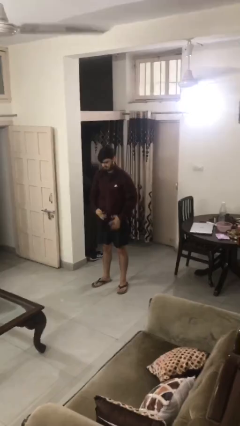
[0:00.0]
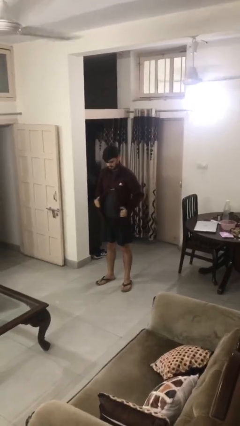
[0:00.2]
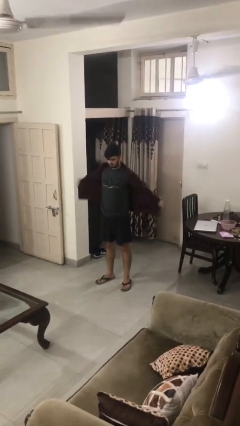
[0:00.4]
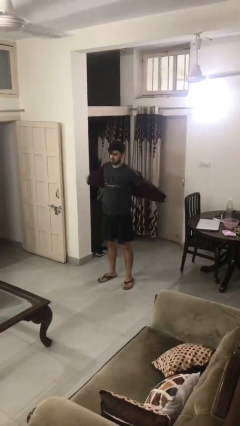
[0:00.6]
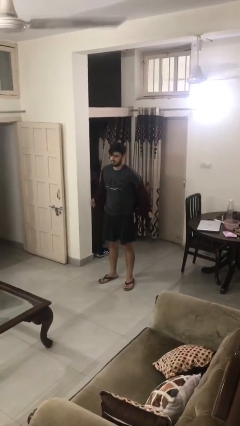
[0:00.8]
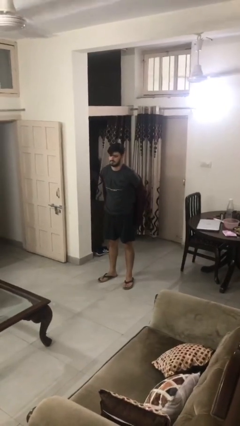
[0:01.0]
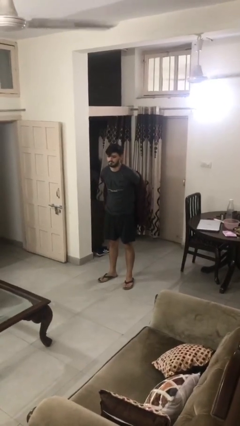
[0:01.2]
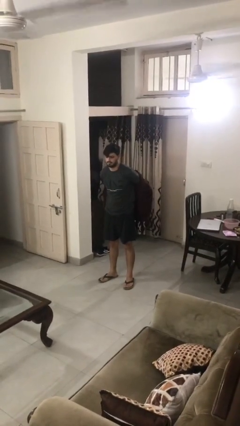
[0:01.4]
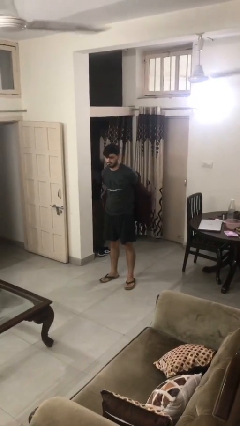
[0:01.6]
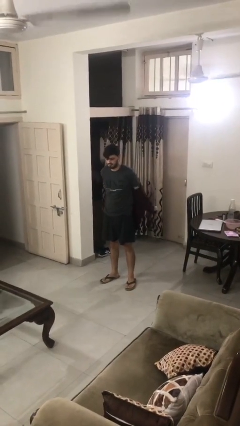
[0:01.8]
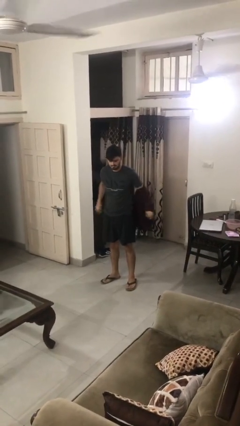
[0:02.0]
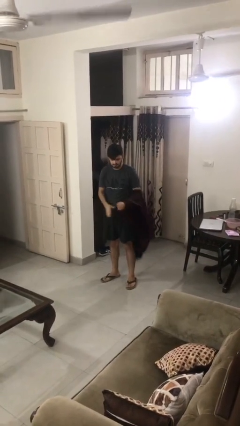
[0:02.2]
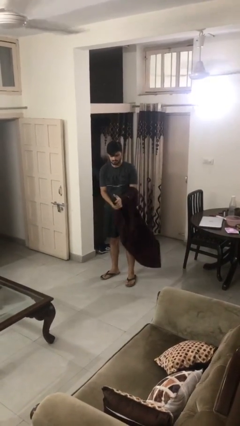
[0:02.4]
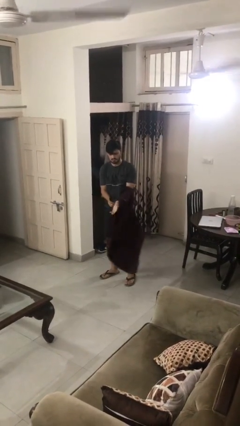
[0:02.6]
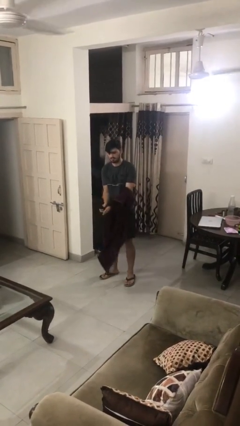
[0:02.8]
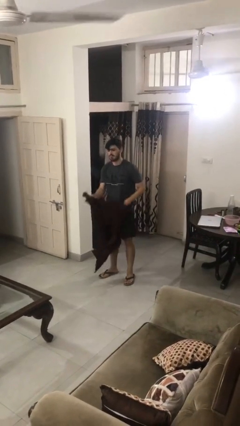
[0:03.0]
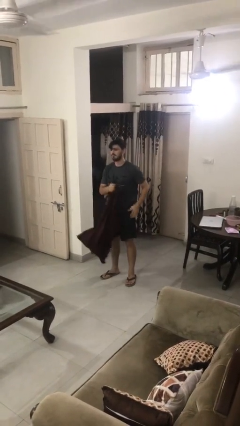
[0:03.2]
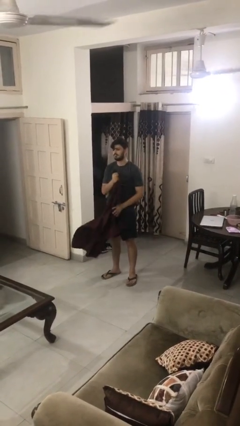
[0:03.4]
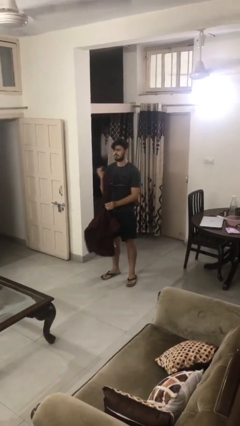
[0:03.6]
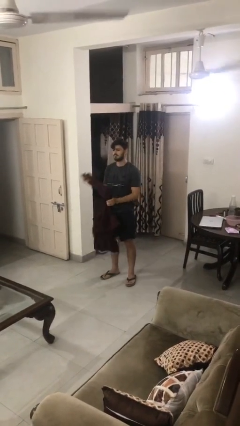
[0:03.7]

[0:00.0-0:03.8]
person takes off jacket

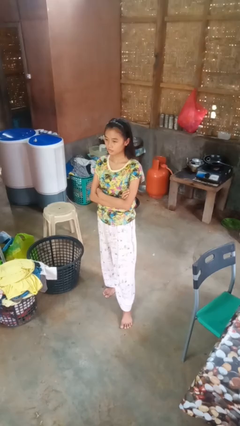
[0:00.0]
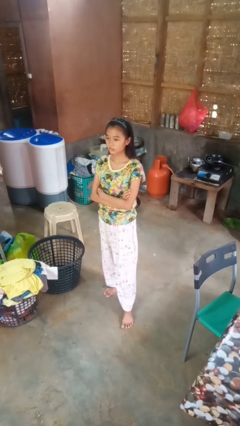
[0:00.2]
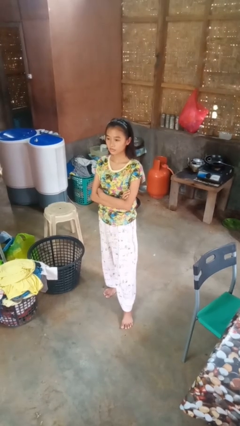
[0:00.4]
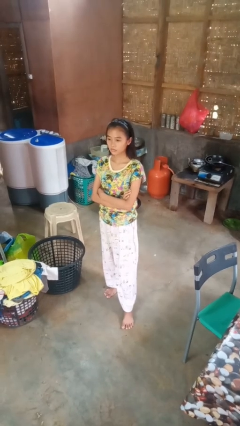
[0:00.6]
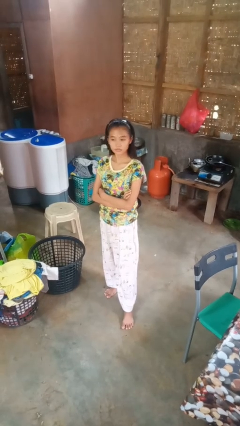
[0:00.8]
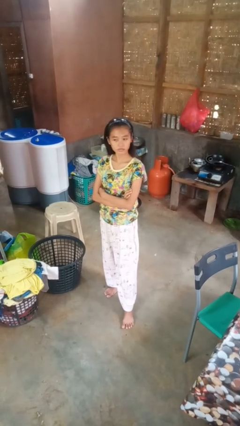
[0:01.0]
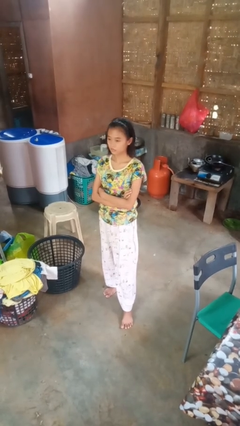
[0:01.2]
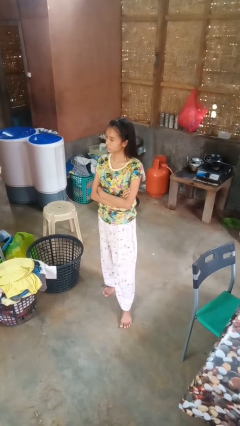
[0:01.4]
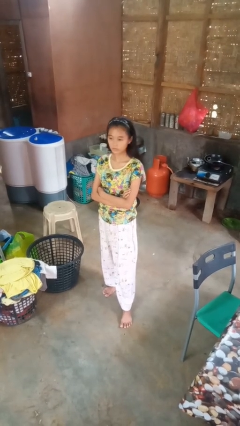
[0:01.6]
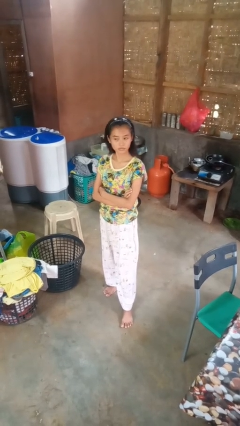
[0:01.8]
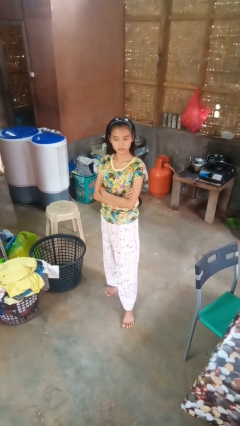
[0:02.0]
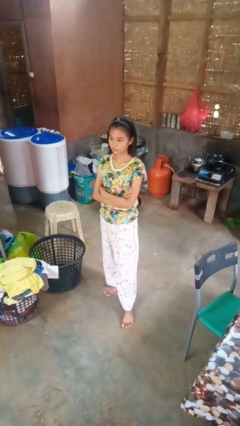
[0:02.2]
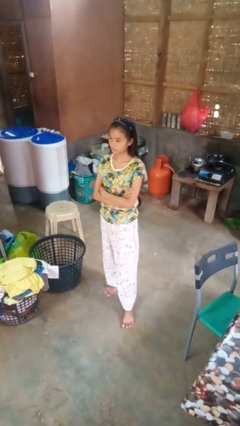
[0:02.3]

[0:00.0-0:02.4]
person shakes head

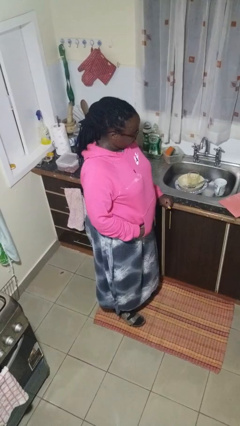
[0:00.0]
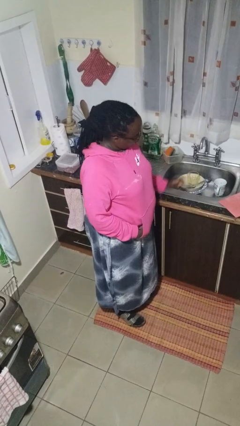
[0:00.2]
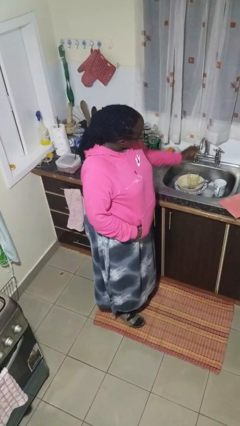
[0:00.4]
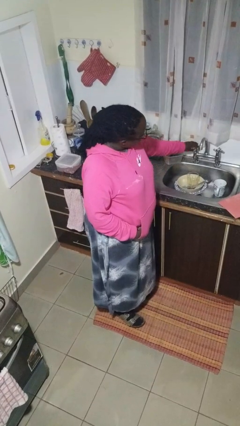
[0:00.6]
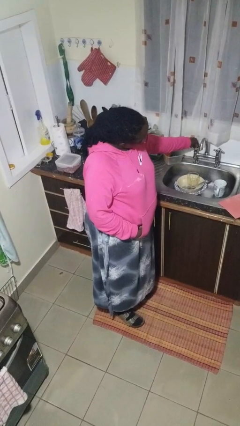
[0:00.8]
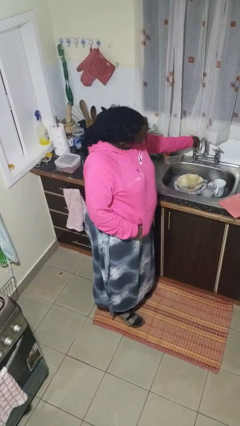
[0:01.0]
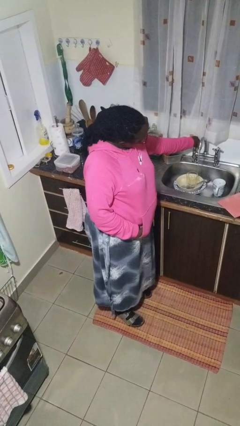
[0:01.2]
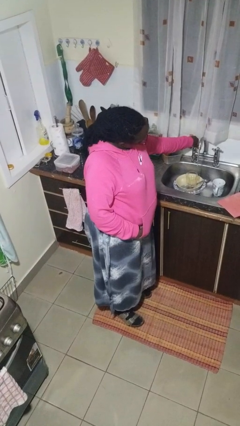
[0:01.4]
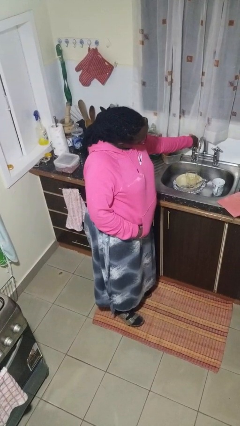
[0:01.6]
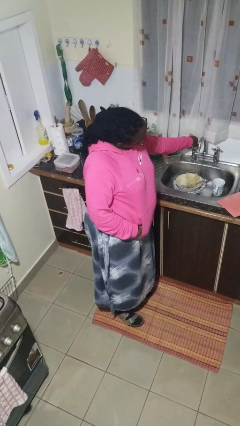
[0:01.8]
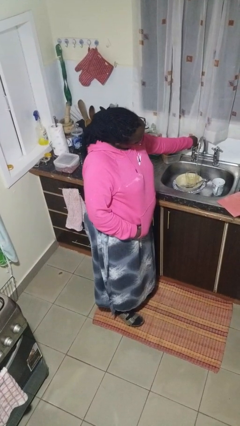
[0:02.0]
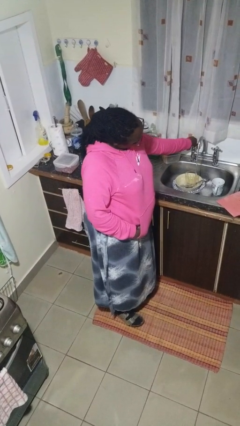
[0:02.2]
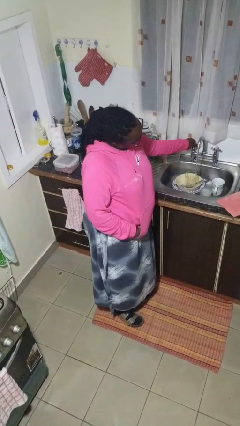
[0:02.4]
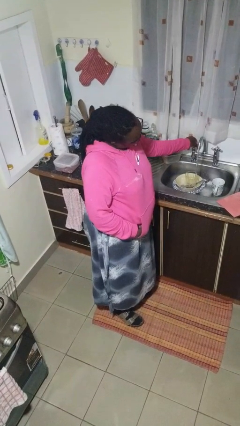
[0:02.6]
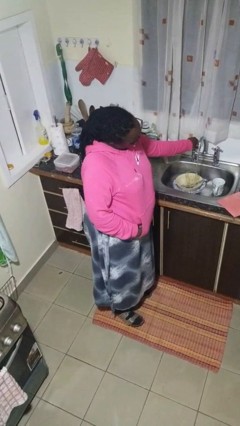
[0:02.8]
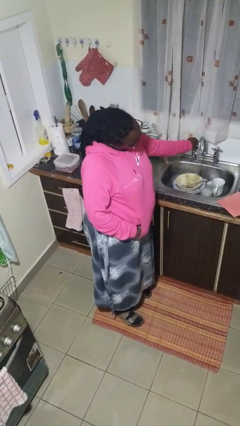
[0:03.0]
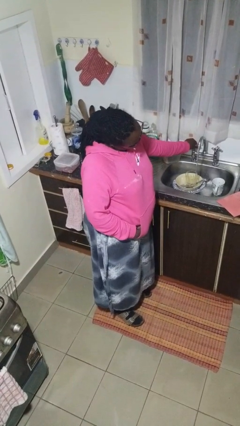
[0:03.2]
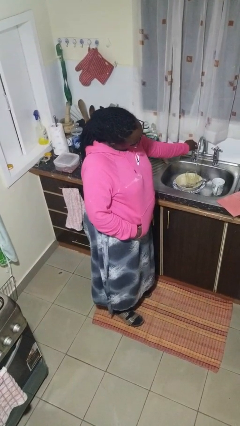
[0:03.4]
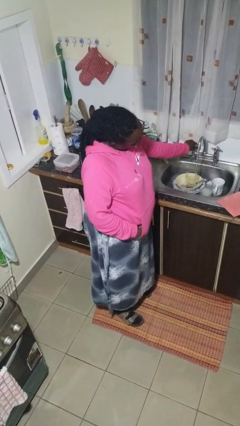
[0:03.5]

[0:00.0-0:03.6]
person turns on faucet

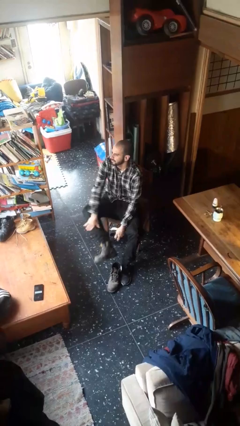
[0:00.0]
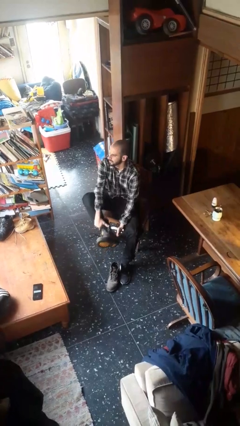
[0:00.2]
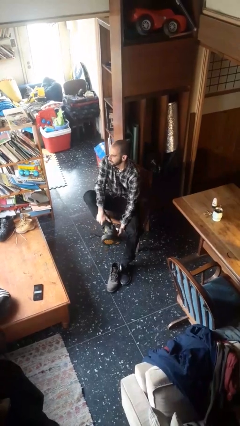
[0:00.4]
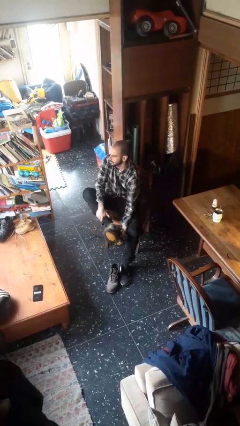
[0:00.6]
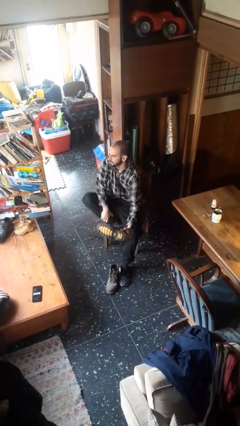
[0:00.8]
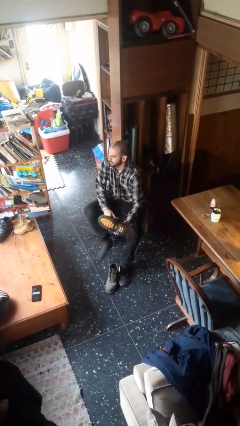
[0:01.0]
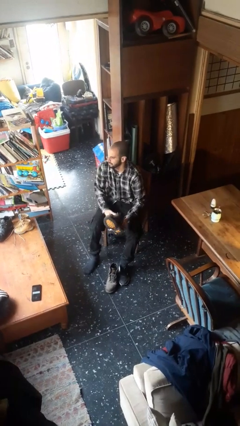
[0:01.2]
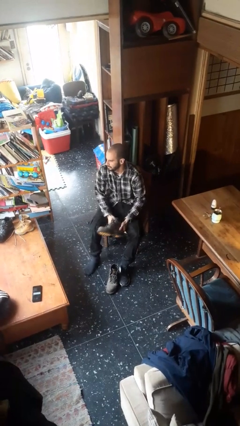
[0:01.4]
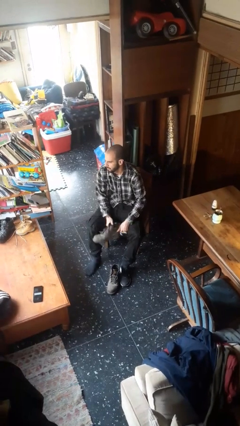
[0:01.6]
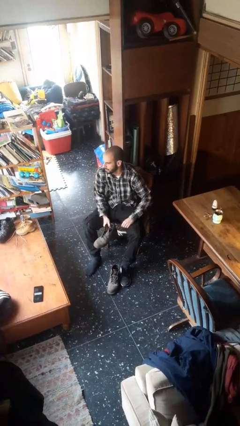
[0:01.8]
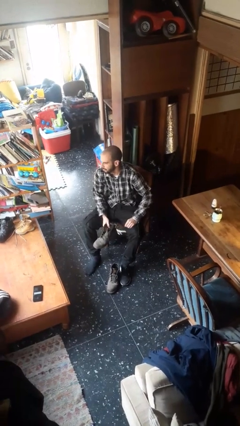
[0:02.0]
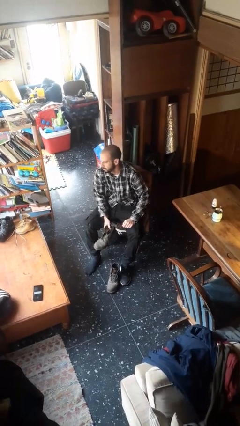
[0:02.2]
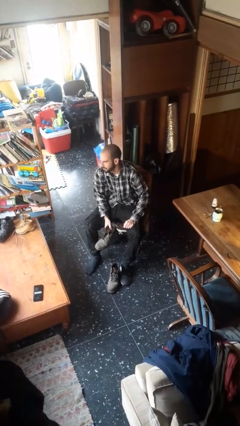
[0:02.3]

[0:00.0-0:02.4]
person takes off boots

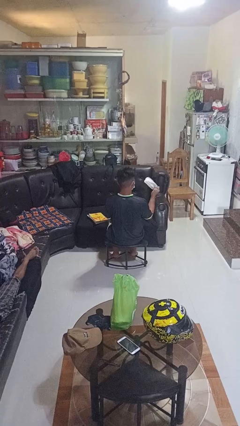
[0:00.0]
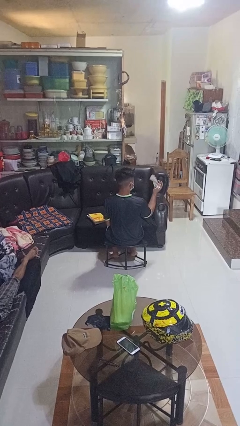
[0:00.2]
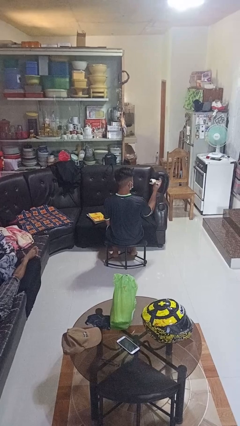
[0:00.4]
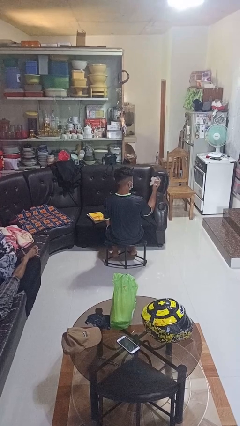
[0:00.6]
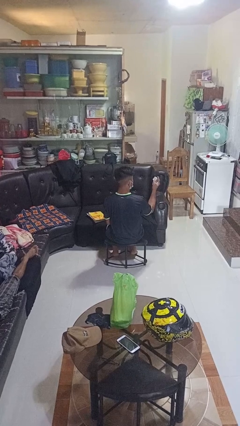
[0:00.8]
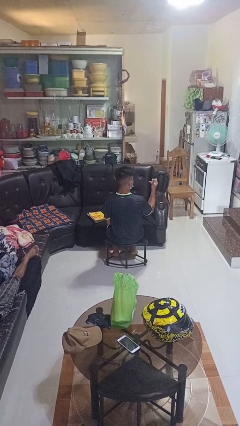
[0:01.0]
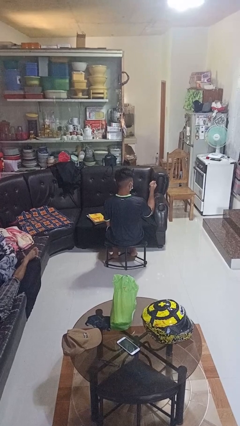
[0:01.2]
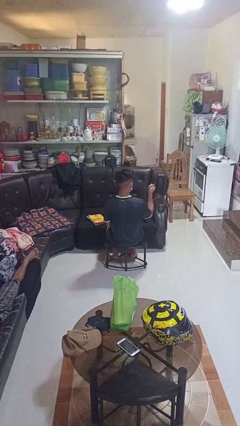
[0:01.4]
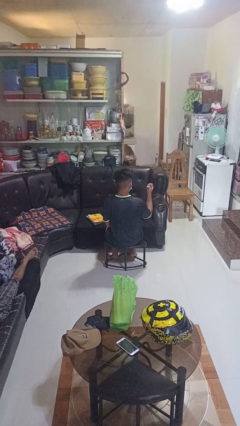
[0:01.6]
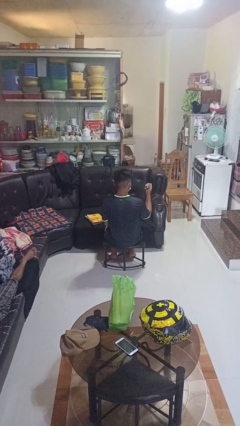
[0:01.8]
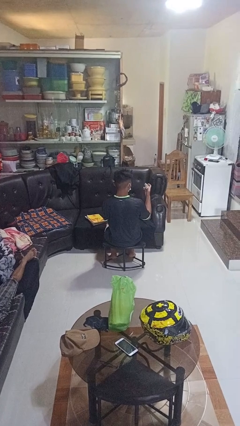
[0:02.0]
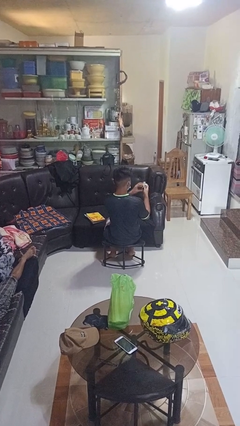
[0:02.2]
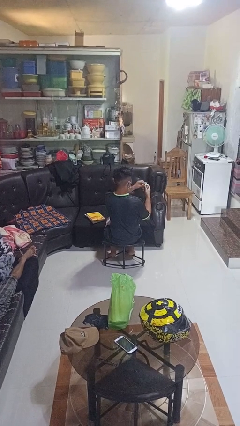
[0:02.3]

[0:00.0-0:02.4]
person crumples paper

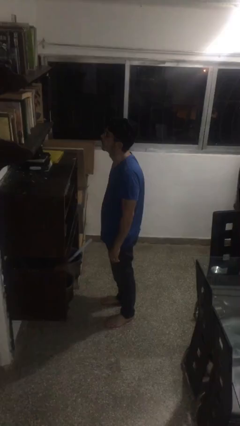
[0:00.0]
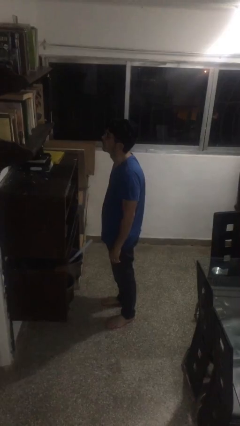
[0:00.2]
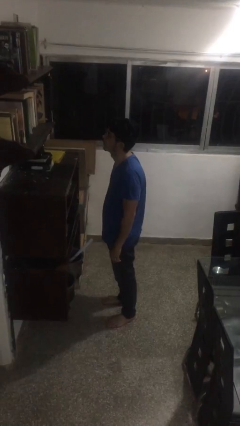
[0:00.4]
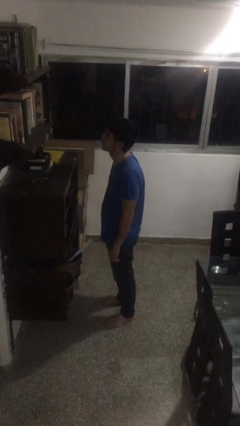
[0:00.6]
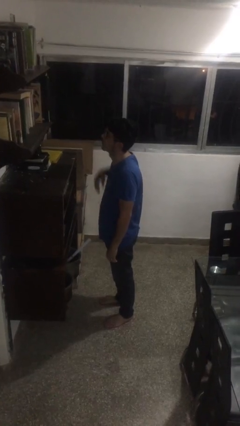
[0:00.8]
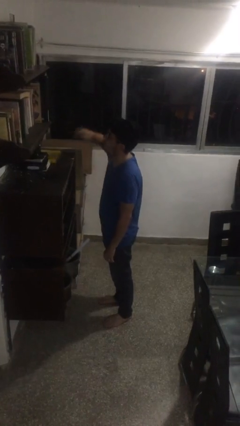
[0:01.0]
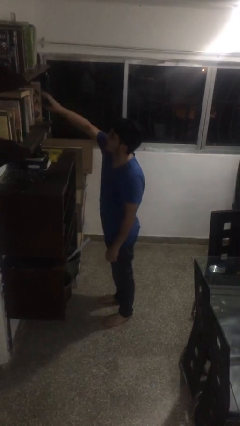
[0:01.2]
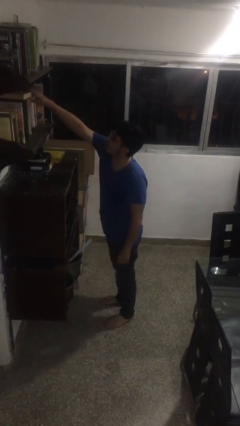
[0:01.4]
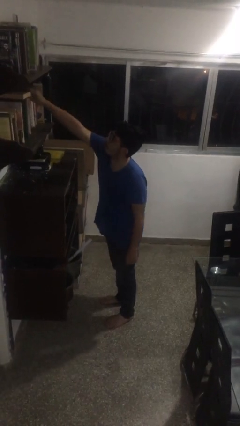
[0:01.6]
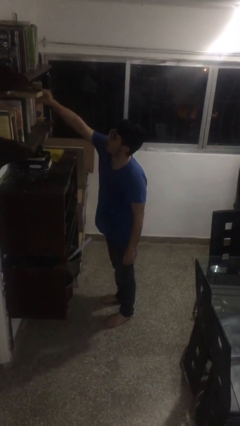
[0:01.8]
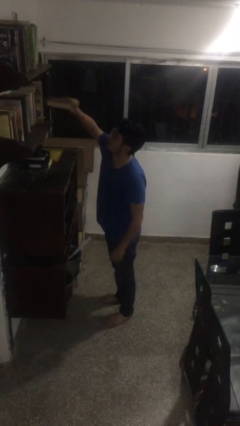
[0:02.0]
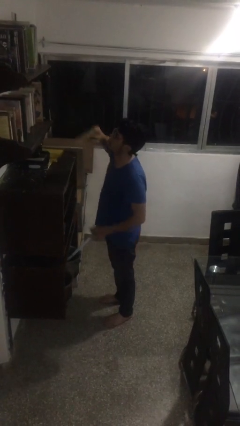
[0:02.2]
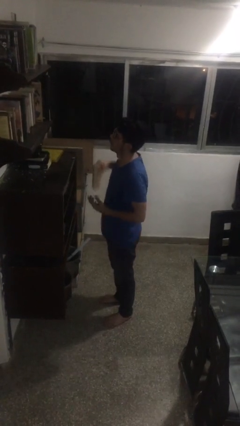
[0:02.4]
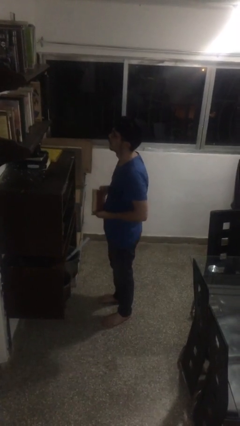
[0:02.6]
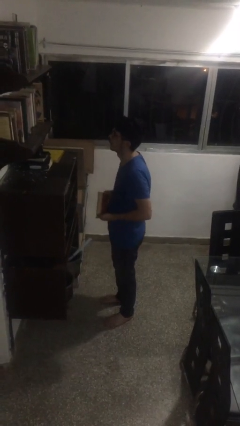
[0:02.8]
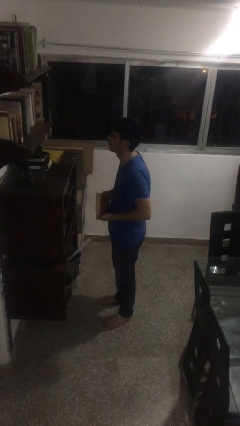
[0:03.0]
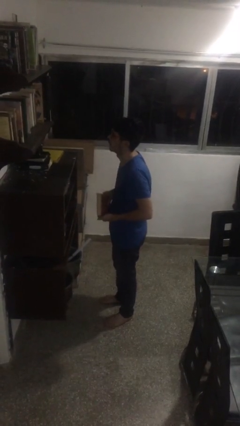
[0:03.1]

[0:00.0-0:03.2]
person picks up object from shelf
